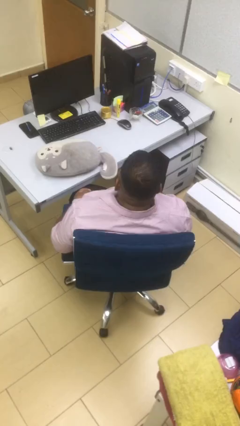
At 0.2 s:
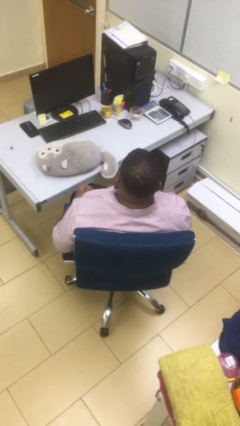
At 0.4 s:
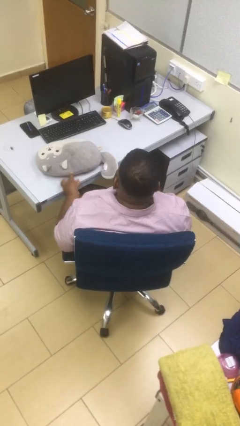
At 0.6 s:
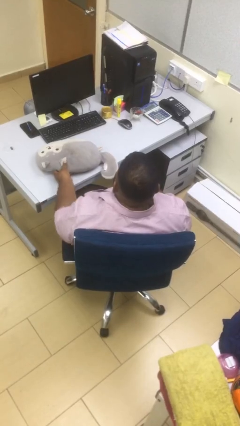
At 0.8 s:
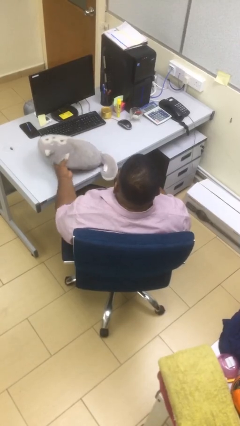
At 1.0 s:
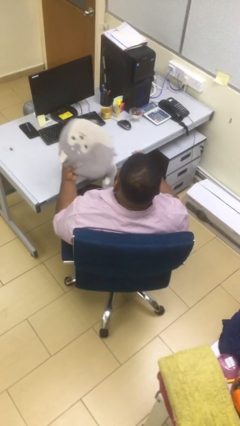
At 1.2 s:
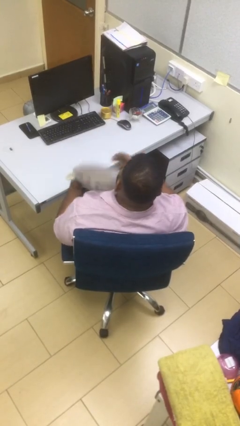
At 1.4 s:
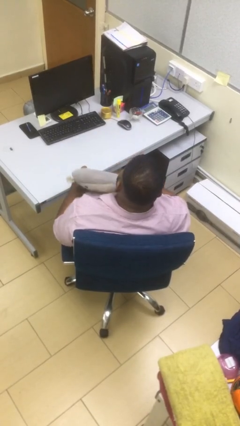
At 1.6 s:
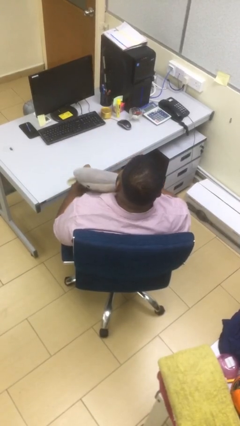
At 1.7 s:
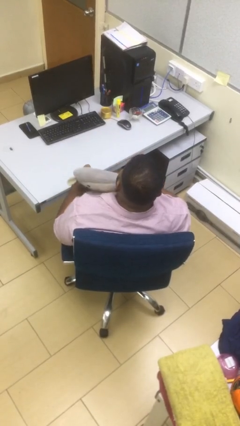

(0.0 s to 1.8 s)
person hugs stuffed animal

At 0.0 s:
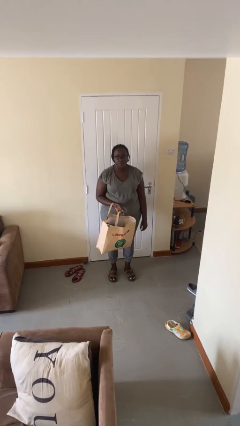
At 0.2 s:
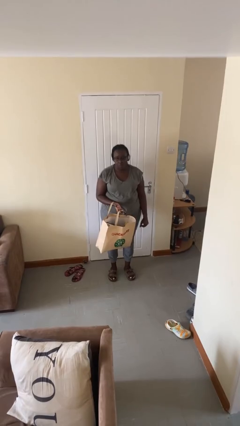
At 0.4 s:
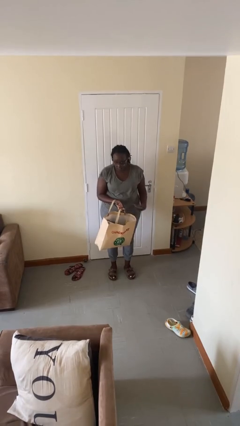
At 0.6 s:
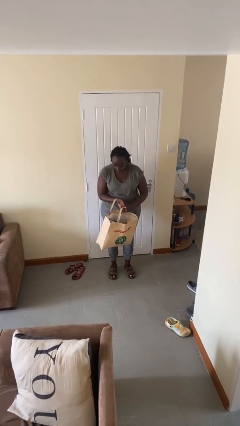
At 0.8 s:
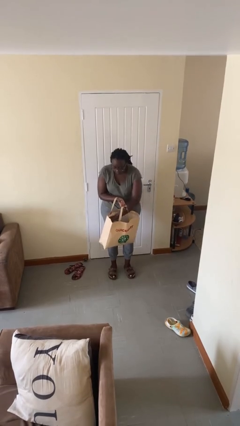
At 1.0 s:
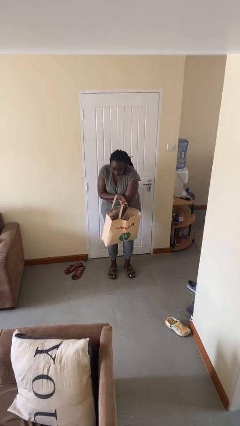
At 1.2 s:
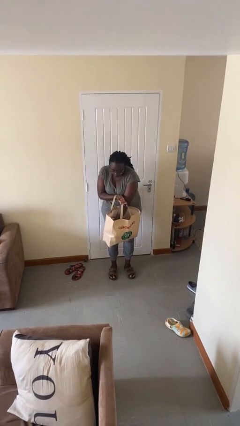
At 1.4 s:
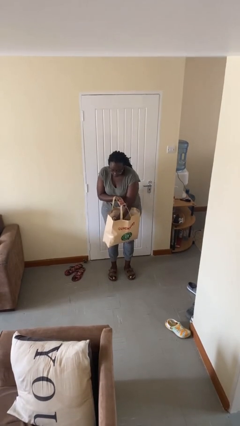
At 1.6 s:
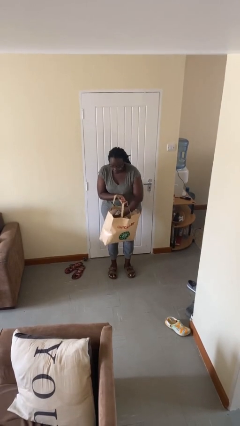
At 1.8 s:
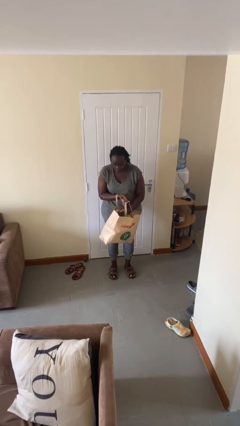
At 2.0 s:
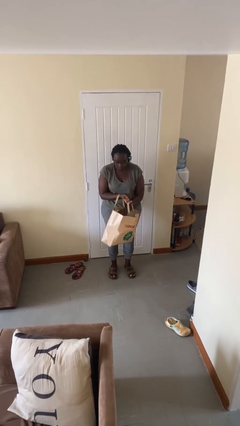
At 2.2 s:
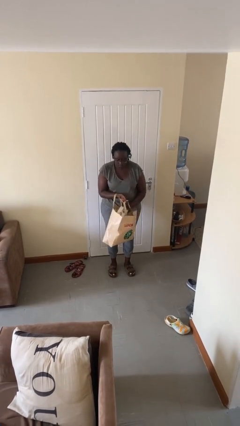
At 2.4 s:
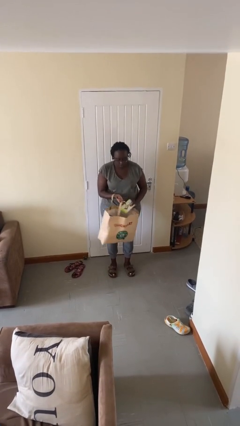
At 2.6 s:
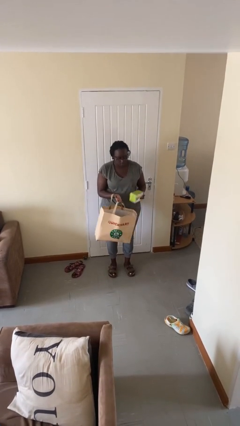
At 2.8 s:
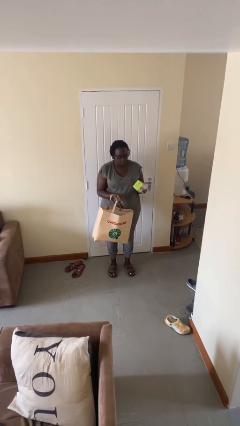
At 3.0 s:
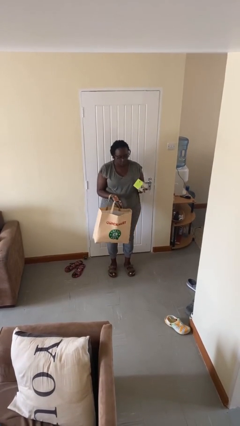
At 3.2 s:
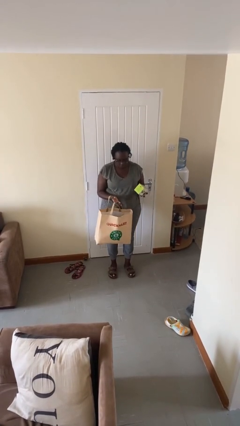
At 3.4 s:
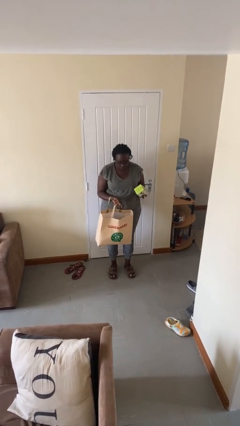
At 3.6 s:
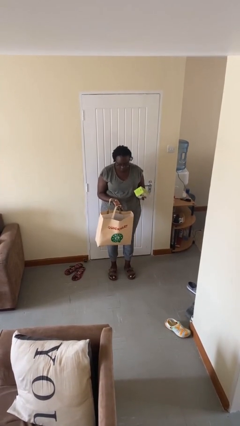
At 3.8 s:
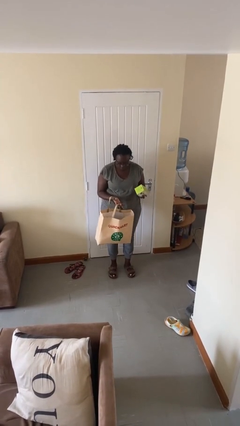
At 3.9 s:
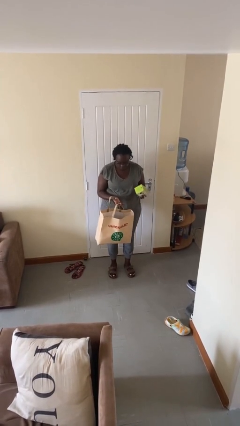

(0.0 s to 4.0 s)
person takes object from bag

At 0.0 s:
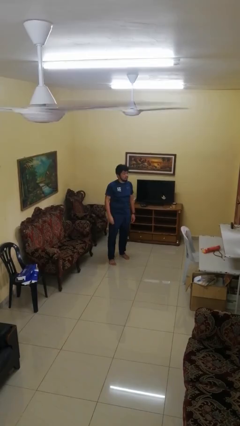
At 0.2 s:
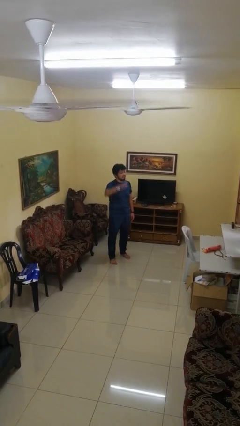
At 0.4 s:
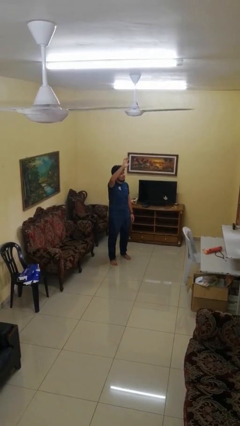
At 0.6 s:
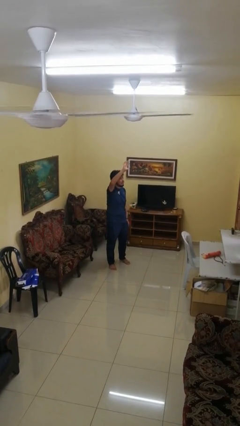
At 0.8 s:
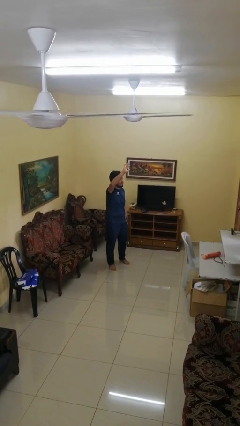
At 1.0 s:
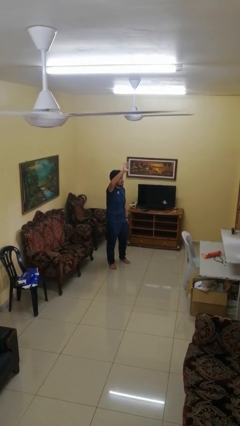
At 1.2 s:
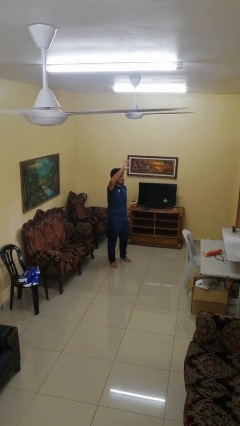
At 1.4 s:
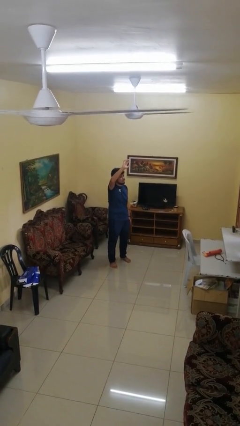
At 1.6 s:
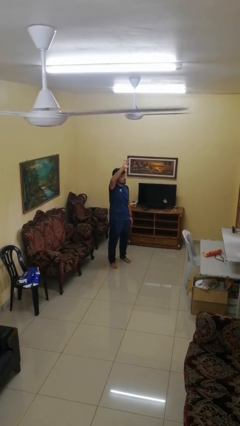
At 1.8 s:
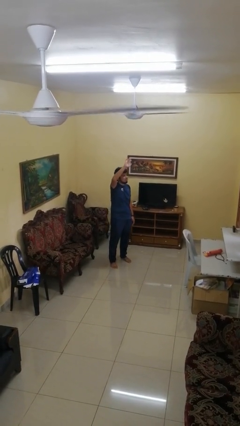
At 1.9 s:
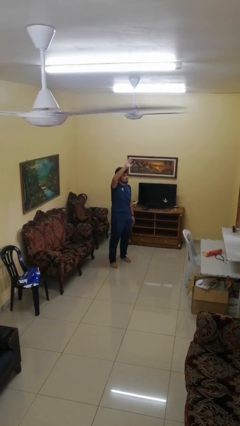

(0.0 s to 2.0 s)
person gestures raise hand

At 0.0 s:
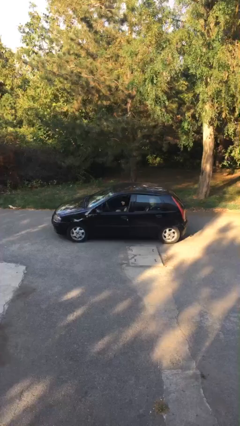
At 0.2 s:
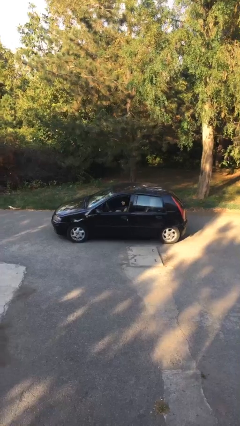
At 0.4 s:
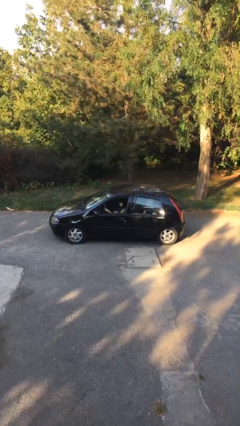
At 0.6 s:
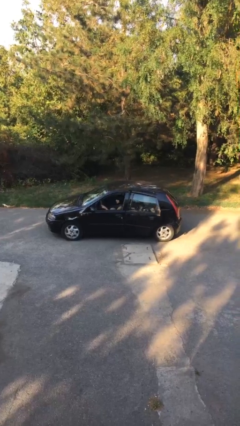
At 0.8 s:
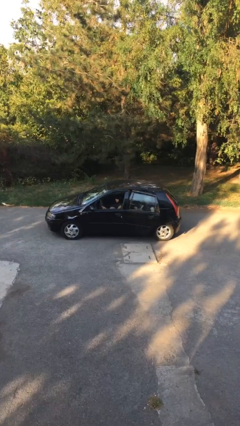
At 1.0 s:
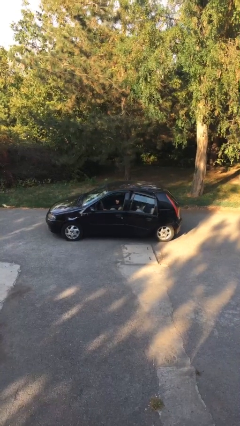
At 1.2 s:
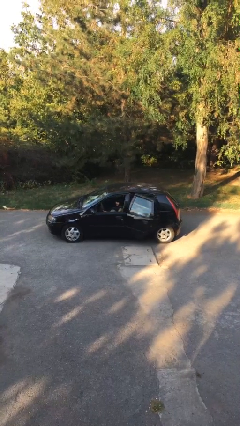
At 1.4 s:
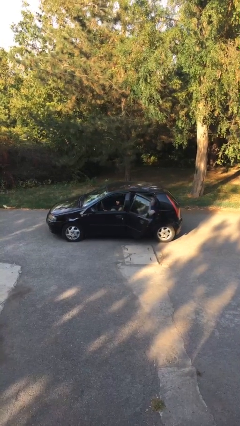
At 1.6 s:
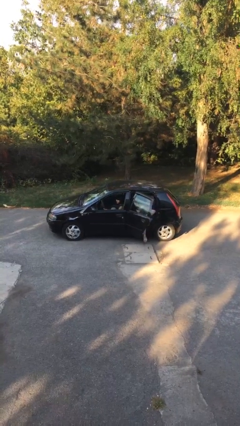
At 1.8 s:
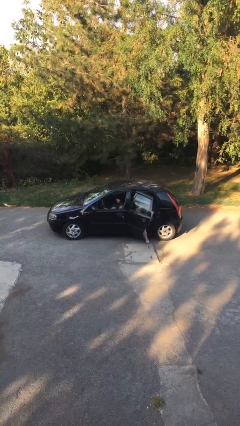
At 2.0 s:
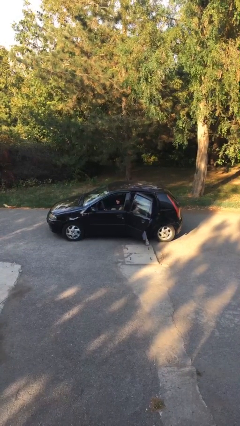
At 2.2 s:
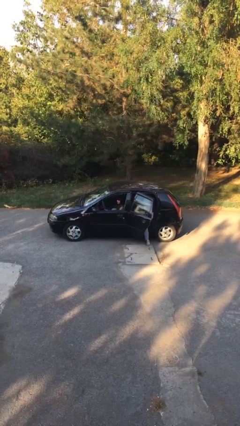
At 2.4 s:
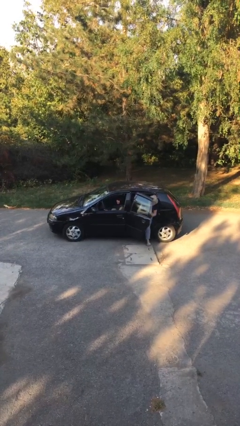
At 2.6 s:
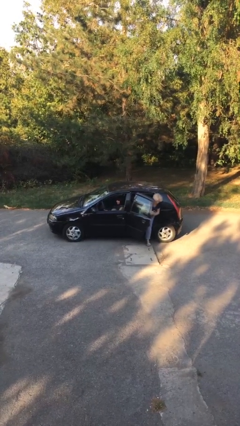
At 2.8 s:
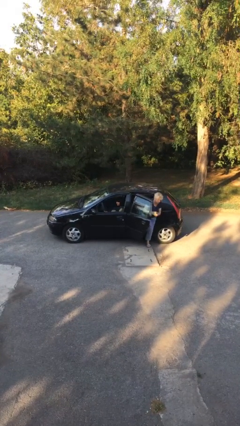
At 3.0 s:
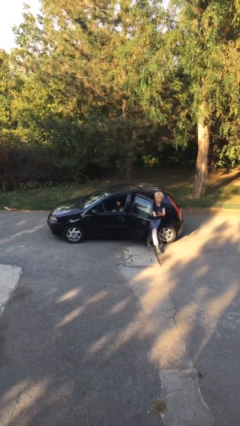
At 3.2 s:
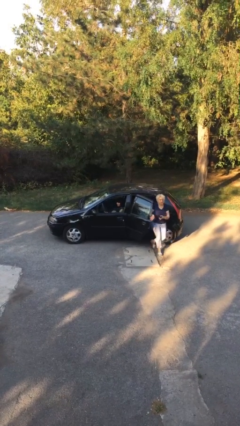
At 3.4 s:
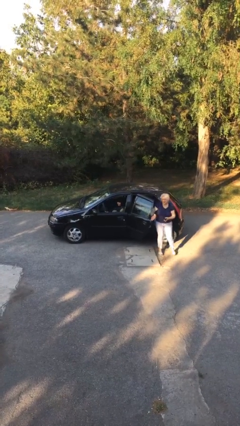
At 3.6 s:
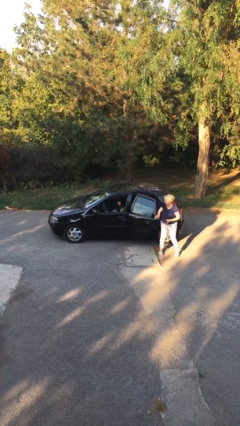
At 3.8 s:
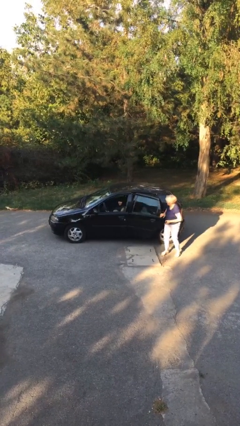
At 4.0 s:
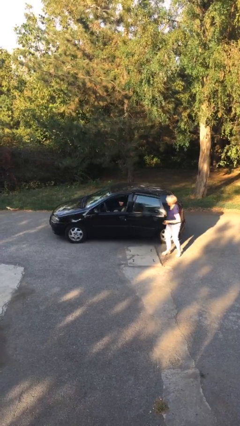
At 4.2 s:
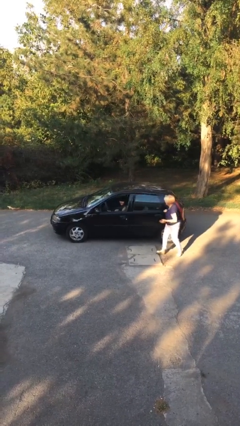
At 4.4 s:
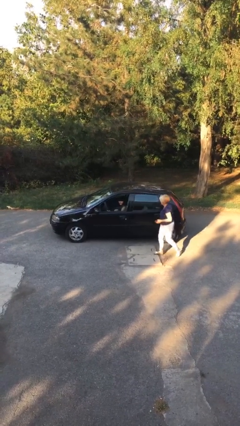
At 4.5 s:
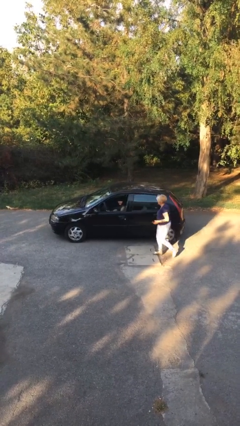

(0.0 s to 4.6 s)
car drops off person

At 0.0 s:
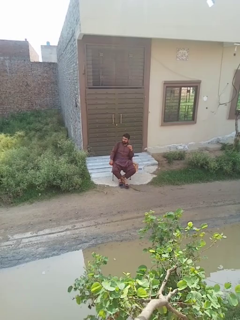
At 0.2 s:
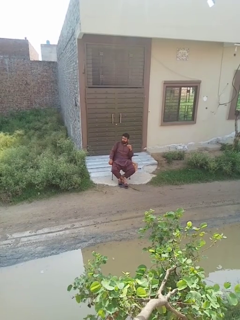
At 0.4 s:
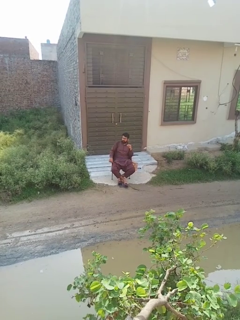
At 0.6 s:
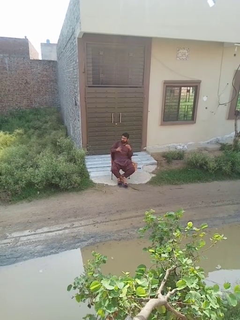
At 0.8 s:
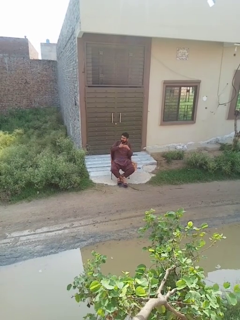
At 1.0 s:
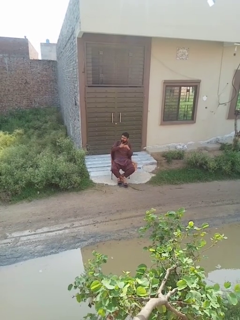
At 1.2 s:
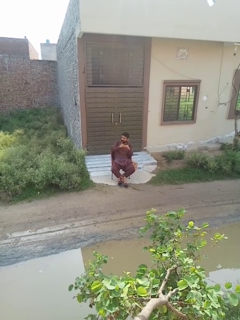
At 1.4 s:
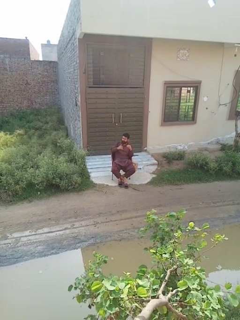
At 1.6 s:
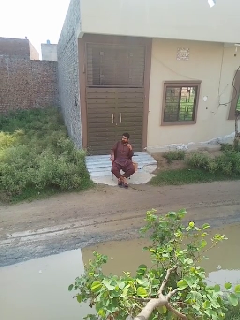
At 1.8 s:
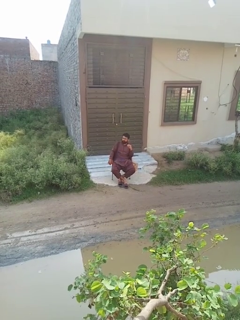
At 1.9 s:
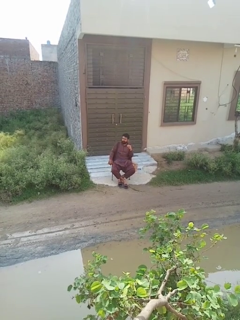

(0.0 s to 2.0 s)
person takes off ring

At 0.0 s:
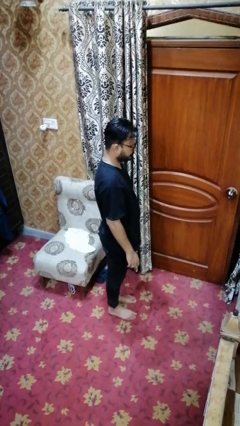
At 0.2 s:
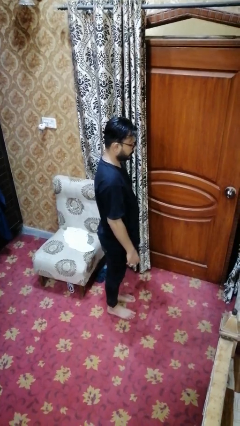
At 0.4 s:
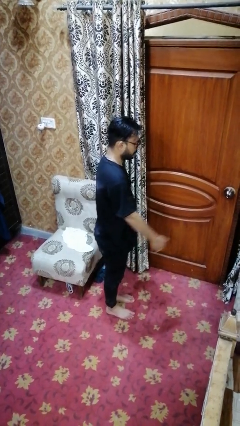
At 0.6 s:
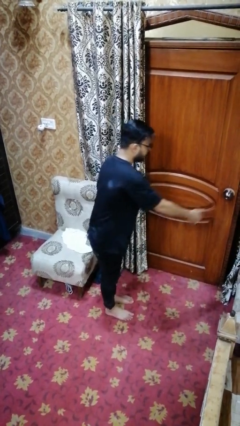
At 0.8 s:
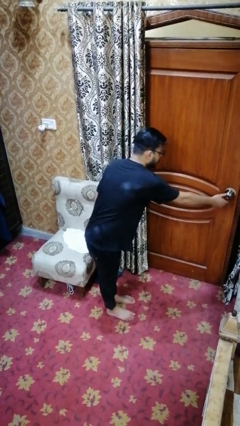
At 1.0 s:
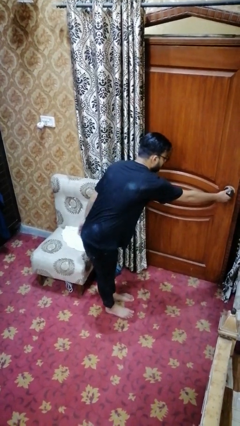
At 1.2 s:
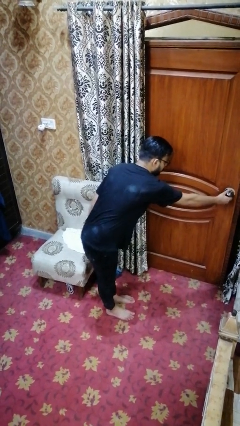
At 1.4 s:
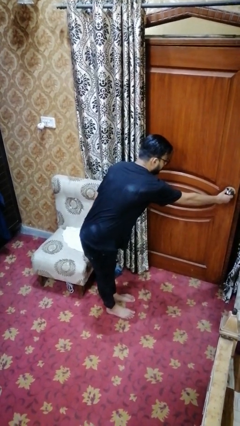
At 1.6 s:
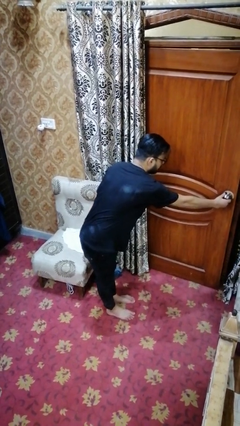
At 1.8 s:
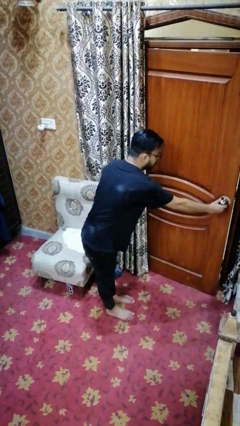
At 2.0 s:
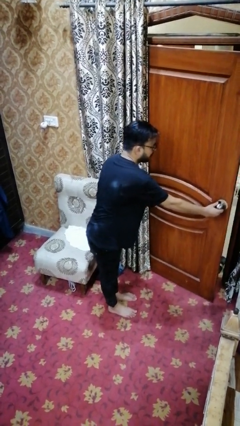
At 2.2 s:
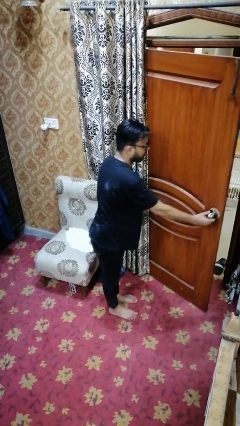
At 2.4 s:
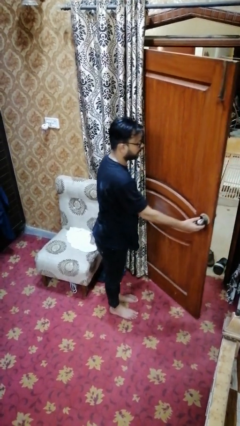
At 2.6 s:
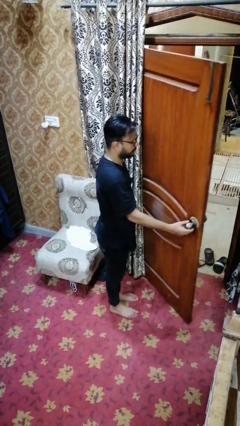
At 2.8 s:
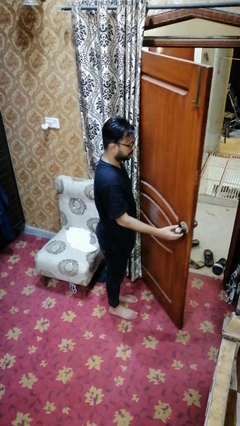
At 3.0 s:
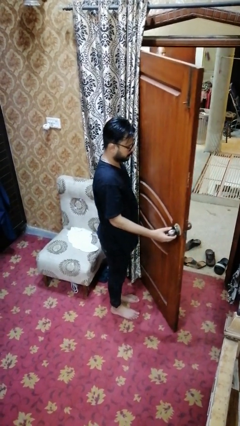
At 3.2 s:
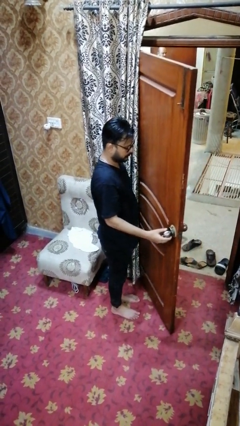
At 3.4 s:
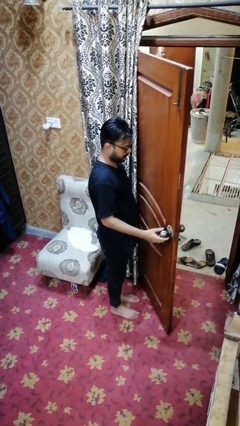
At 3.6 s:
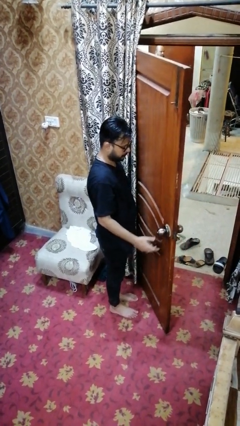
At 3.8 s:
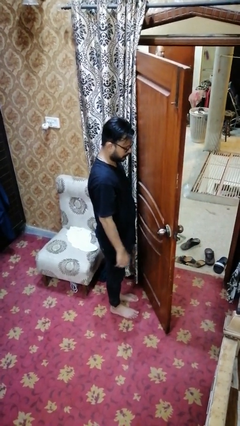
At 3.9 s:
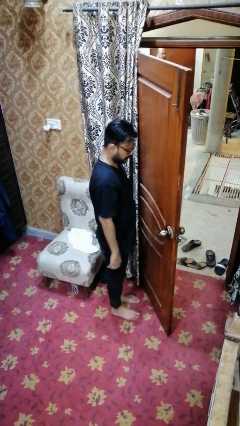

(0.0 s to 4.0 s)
person opens facility door
